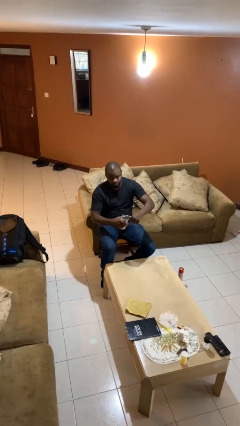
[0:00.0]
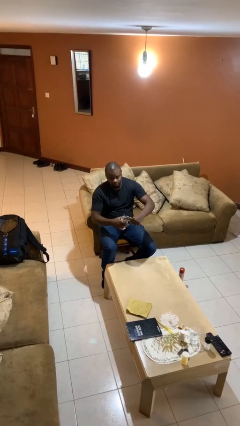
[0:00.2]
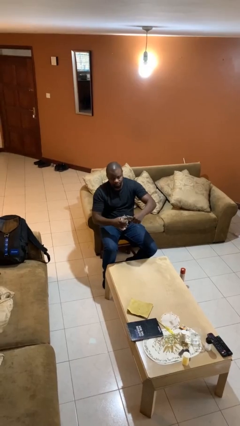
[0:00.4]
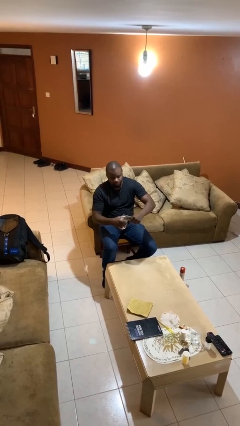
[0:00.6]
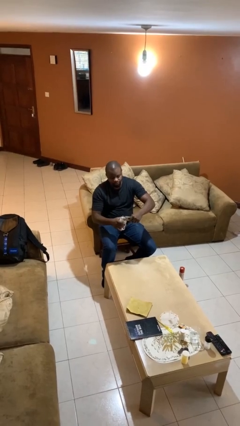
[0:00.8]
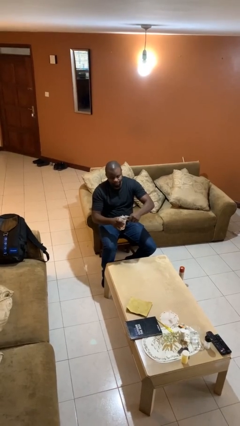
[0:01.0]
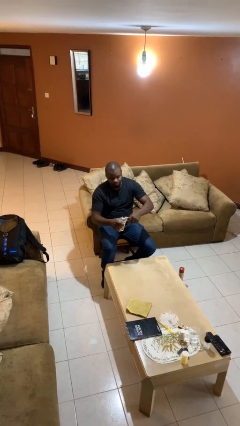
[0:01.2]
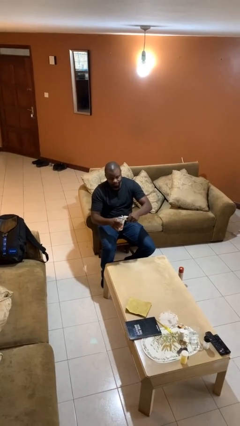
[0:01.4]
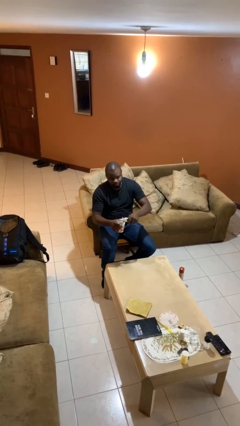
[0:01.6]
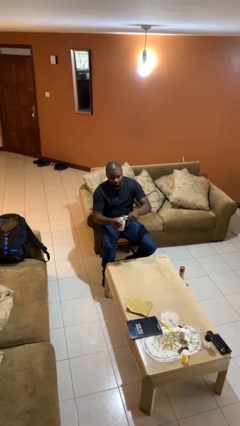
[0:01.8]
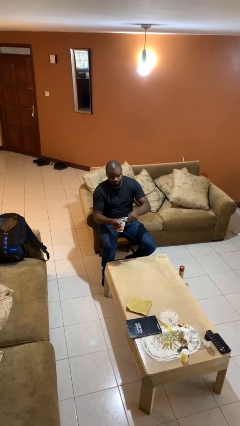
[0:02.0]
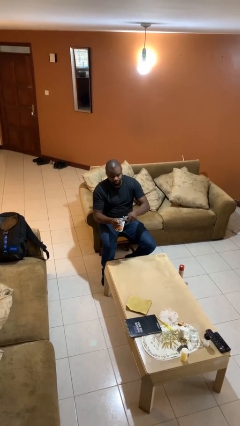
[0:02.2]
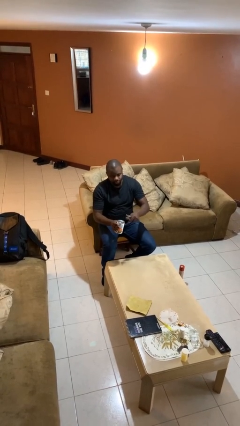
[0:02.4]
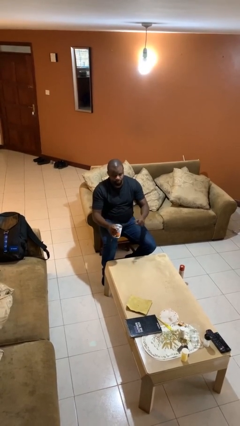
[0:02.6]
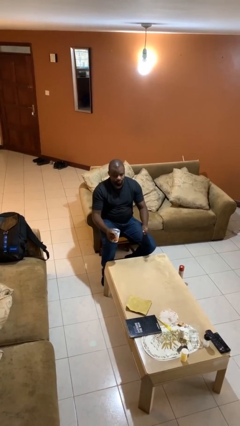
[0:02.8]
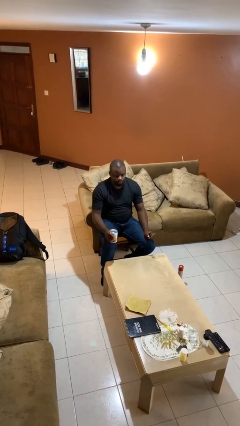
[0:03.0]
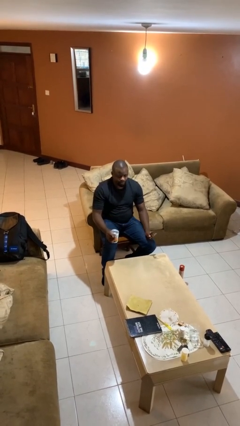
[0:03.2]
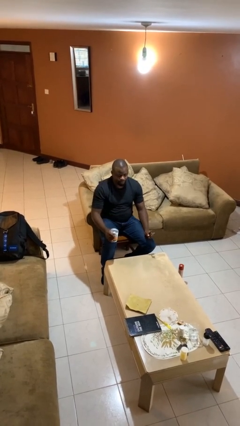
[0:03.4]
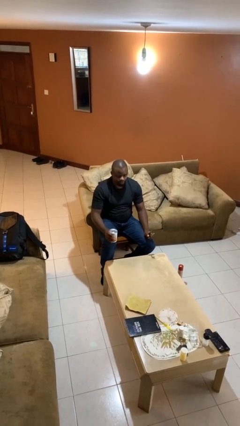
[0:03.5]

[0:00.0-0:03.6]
person opens can with can opener

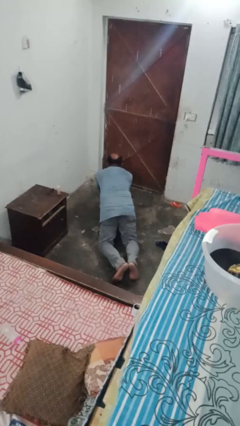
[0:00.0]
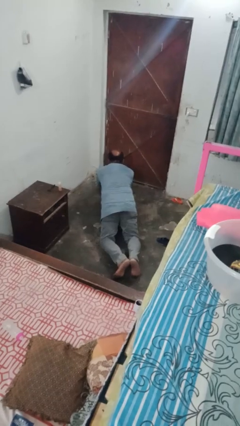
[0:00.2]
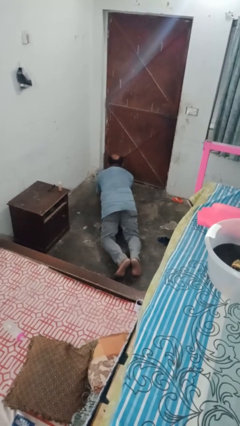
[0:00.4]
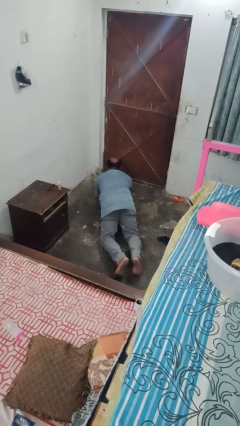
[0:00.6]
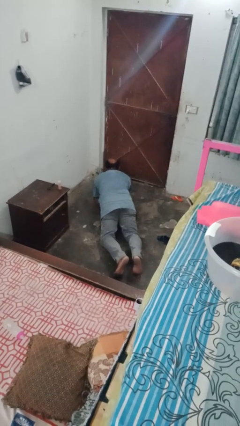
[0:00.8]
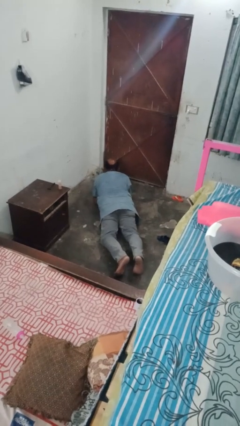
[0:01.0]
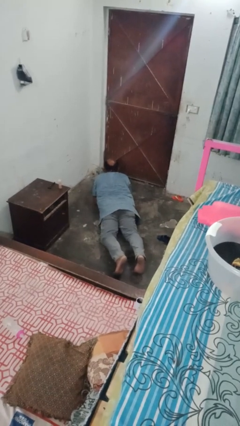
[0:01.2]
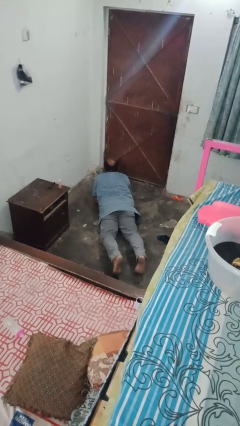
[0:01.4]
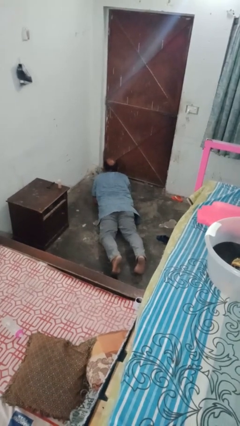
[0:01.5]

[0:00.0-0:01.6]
person stands up from floor

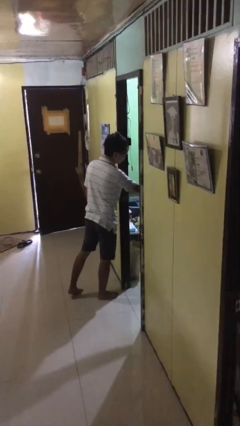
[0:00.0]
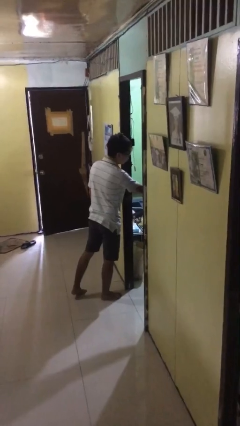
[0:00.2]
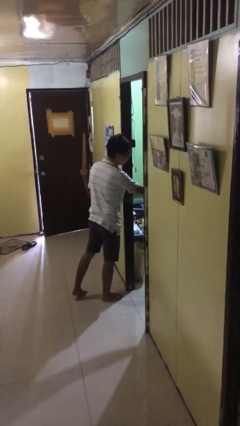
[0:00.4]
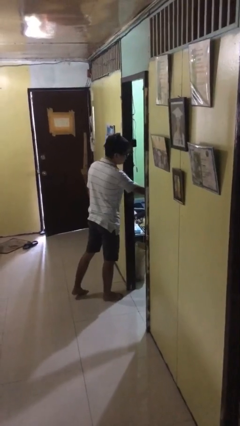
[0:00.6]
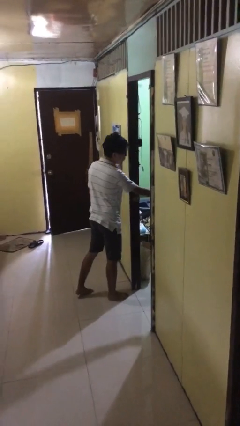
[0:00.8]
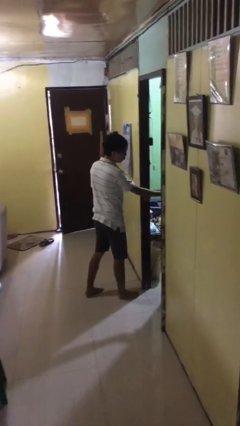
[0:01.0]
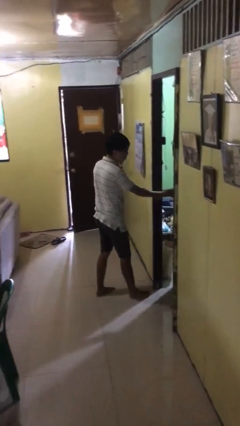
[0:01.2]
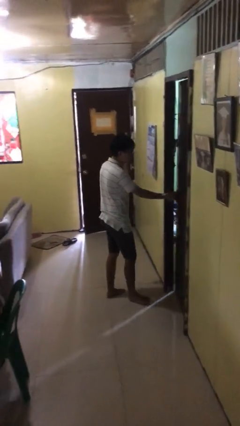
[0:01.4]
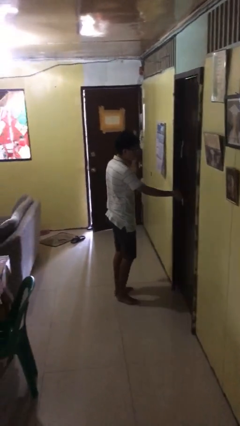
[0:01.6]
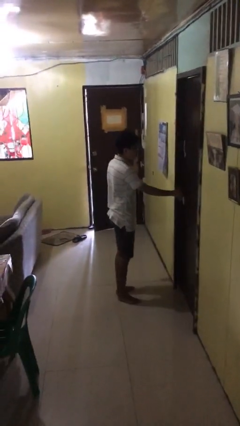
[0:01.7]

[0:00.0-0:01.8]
person closes facility door

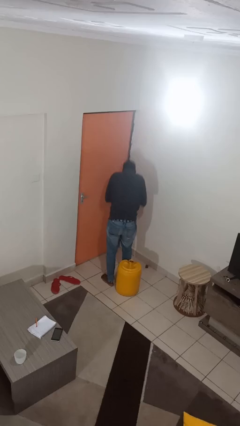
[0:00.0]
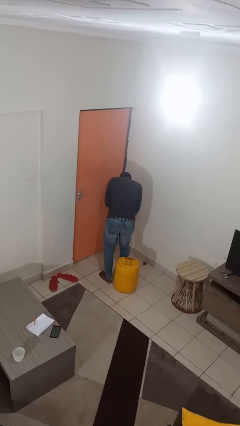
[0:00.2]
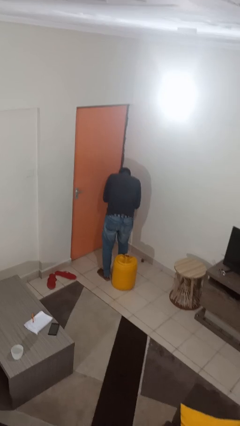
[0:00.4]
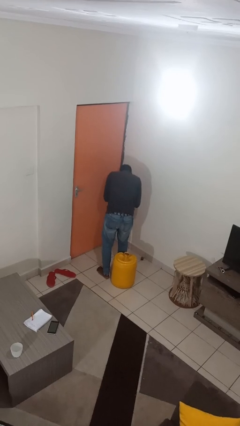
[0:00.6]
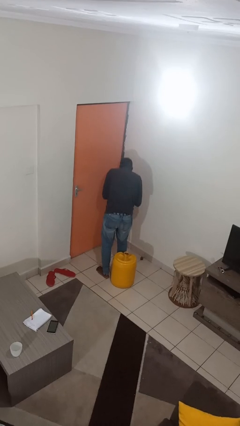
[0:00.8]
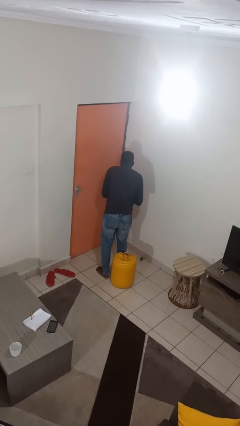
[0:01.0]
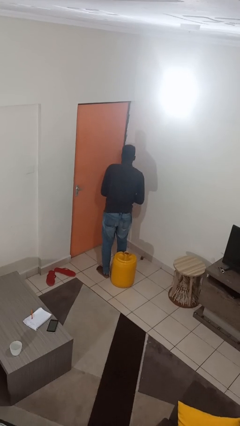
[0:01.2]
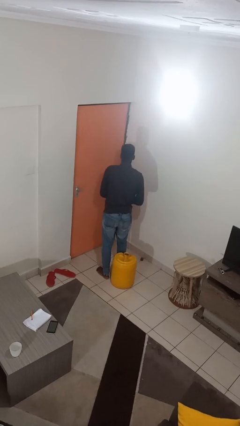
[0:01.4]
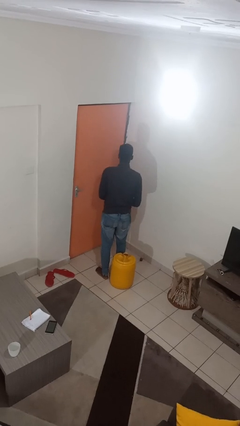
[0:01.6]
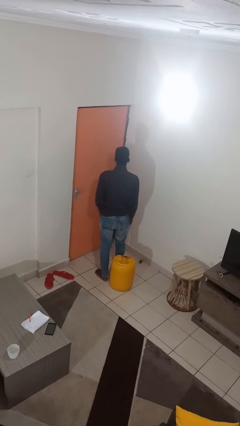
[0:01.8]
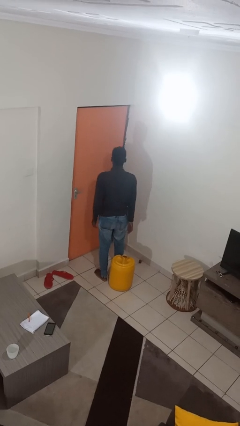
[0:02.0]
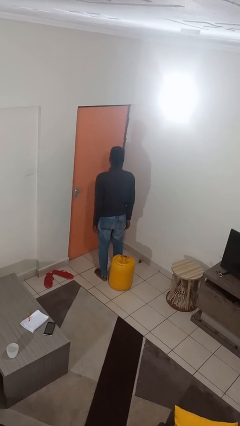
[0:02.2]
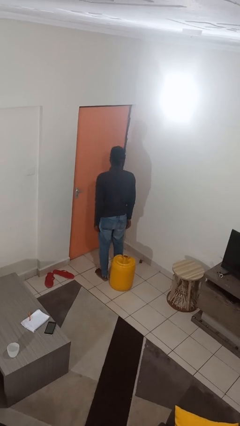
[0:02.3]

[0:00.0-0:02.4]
person sneezes into hand

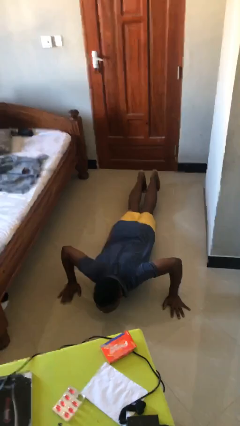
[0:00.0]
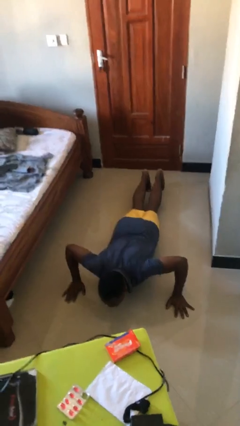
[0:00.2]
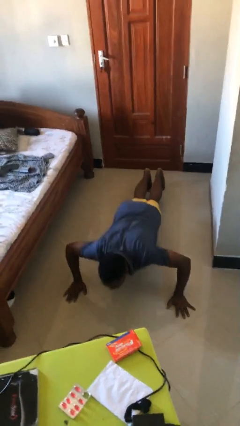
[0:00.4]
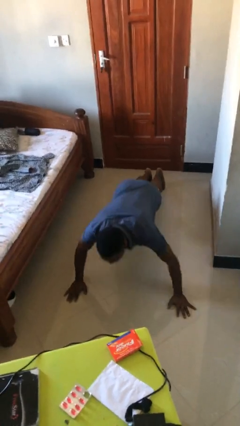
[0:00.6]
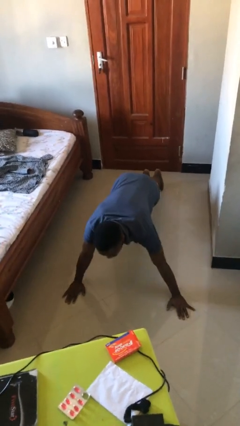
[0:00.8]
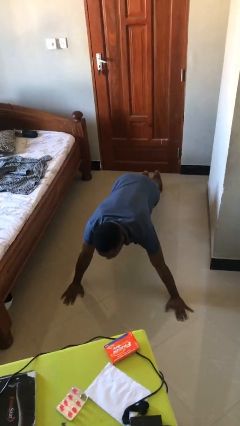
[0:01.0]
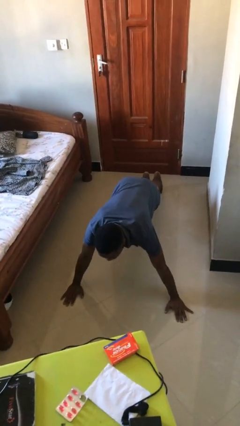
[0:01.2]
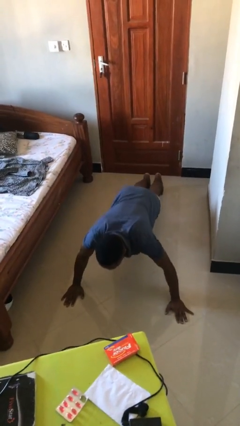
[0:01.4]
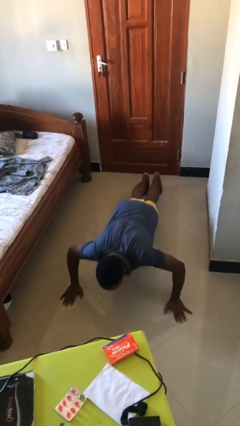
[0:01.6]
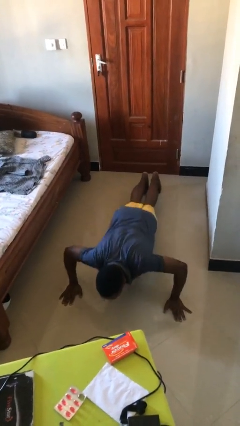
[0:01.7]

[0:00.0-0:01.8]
person exercises with pushup

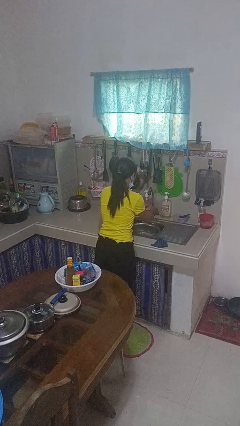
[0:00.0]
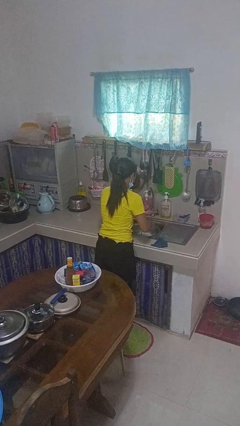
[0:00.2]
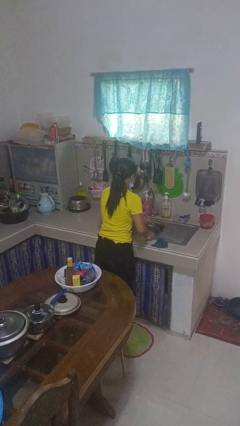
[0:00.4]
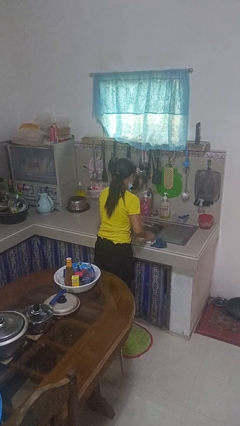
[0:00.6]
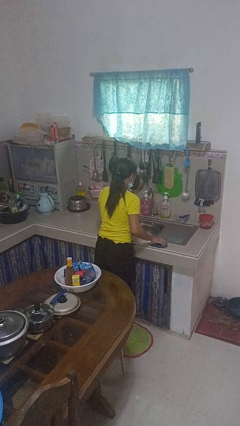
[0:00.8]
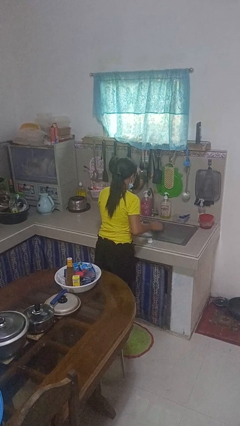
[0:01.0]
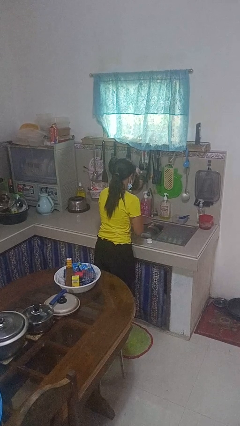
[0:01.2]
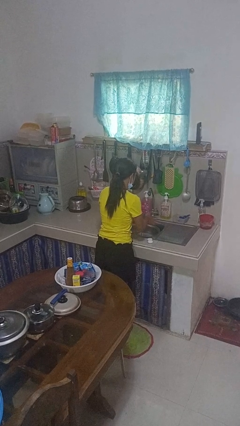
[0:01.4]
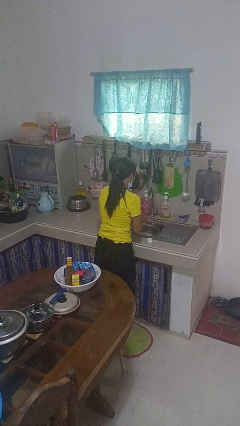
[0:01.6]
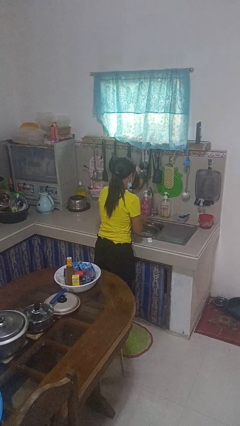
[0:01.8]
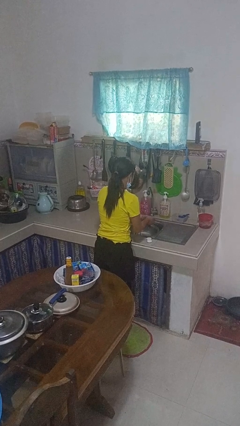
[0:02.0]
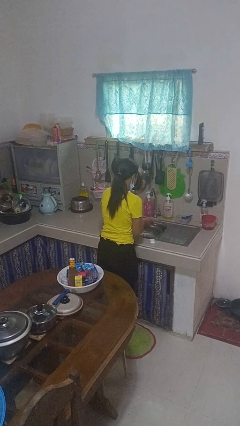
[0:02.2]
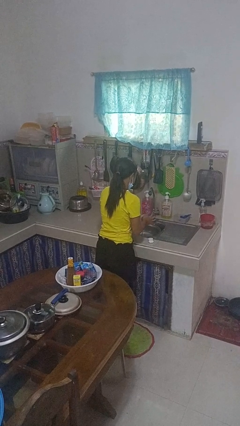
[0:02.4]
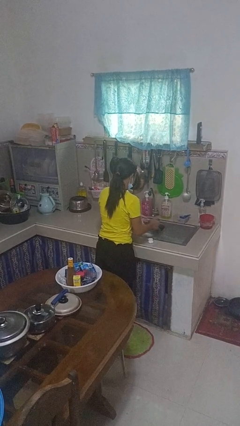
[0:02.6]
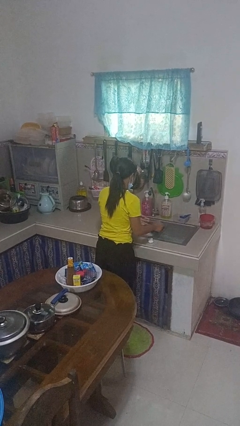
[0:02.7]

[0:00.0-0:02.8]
person dries hands with towel

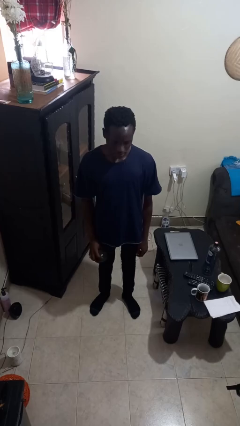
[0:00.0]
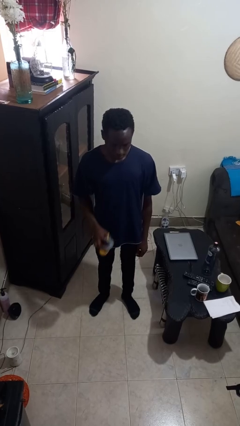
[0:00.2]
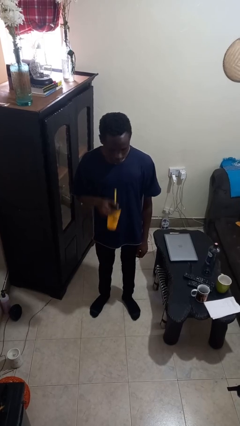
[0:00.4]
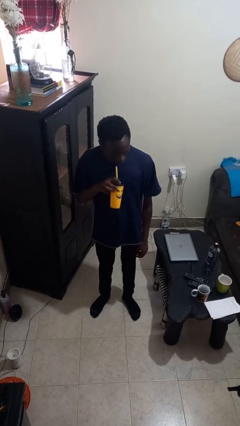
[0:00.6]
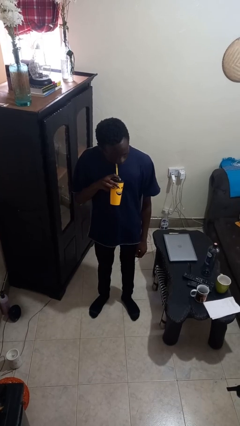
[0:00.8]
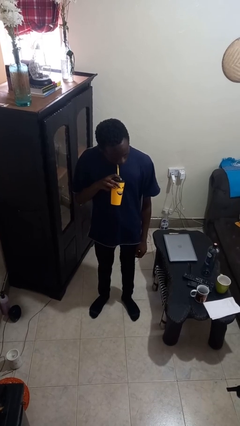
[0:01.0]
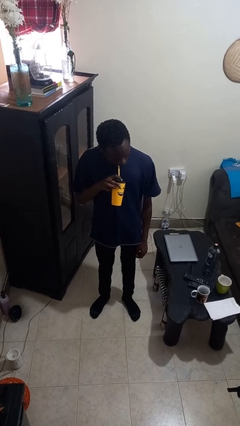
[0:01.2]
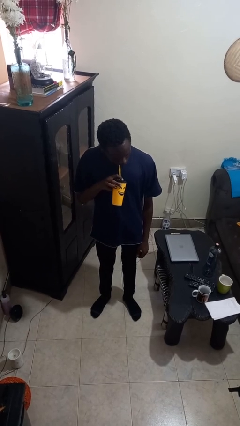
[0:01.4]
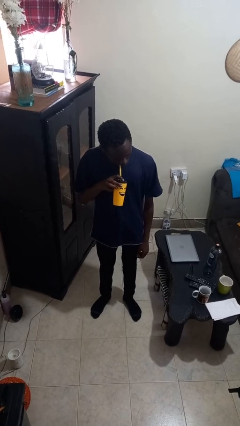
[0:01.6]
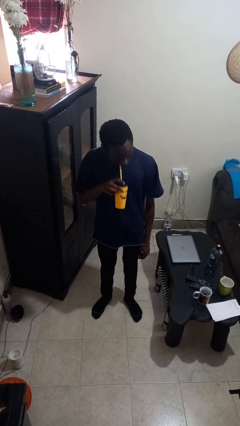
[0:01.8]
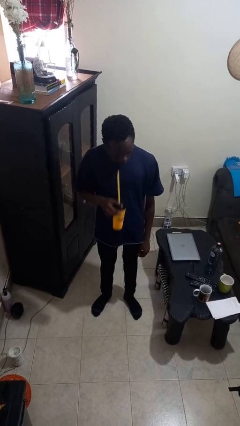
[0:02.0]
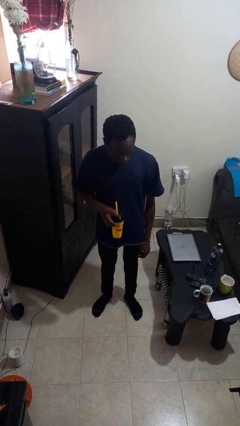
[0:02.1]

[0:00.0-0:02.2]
person drinks from straw

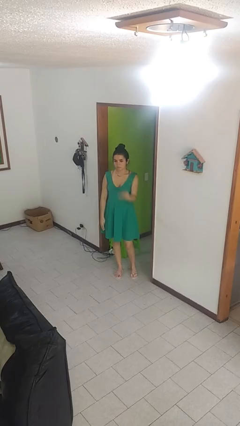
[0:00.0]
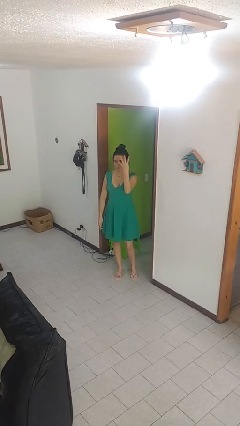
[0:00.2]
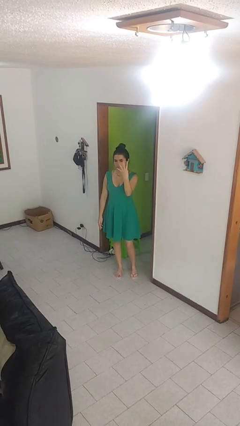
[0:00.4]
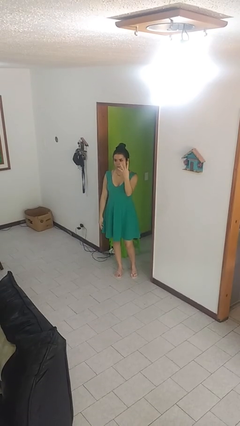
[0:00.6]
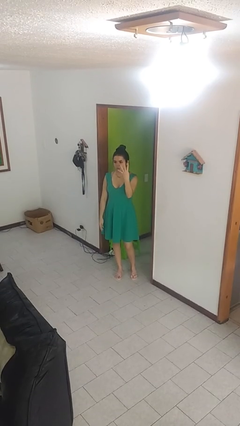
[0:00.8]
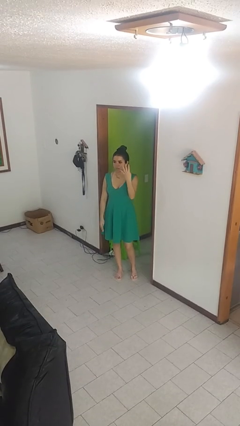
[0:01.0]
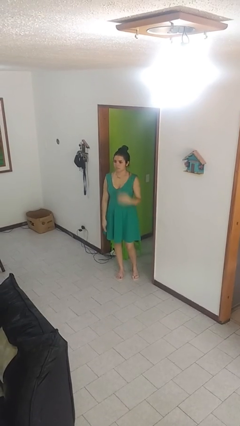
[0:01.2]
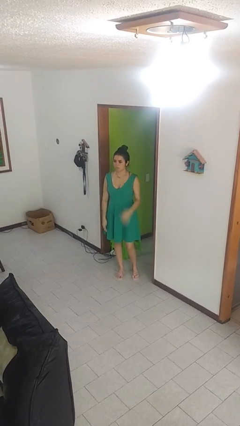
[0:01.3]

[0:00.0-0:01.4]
person gestures number four
